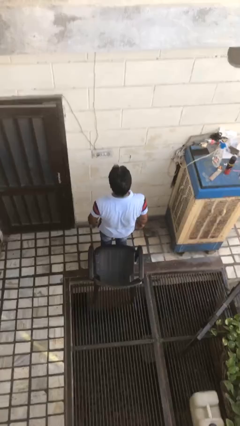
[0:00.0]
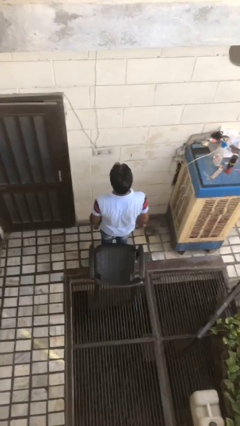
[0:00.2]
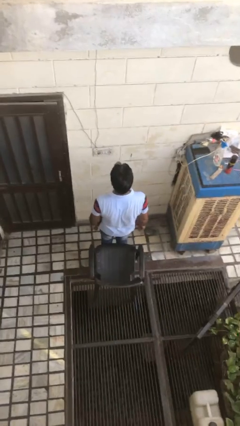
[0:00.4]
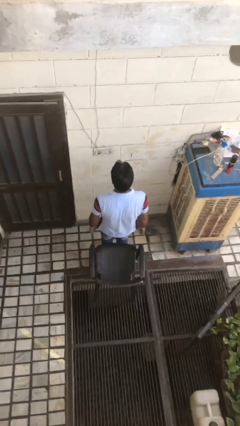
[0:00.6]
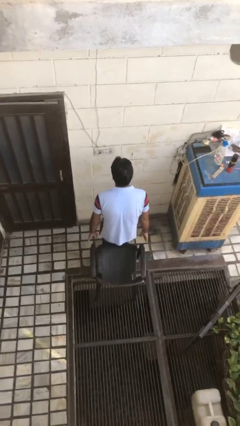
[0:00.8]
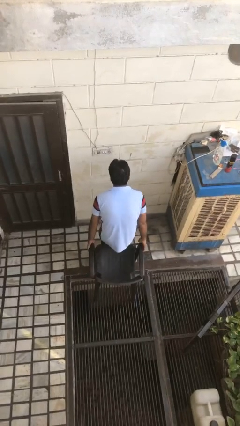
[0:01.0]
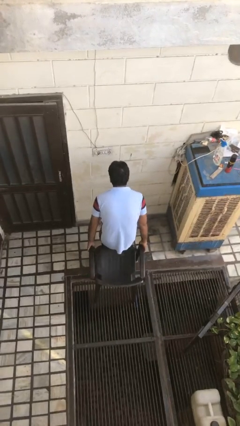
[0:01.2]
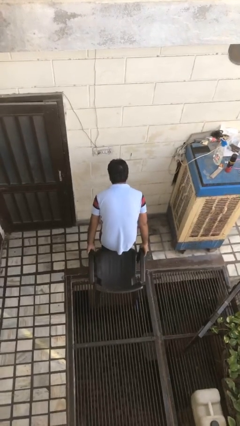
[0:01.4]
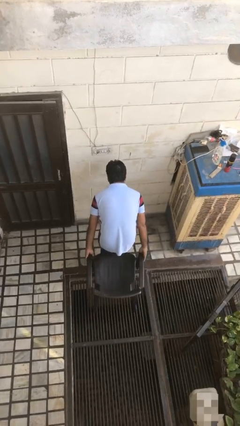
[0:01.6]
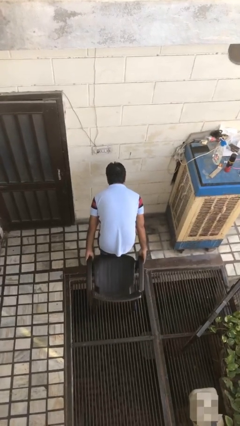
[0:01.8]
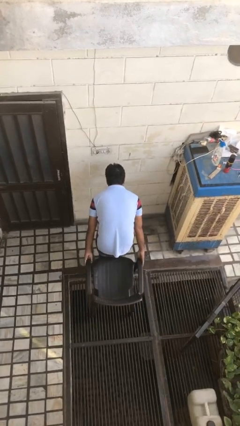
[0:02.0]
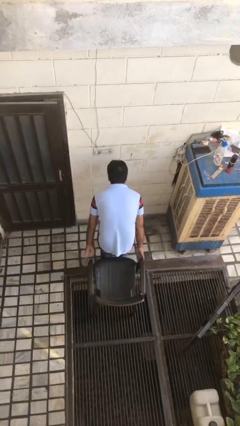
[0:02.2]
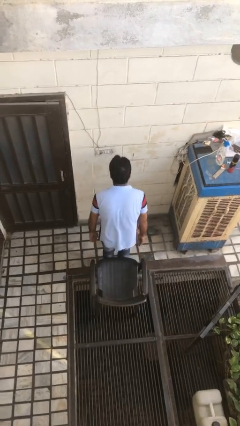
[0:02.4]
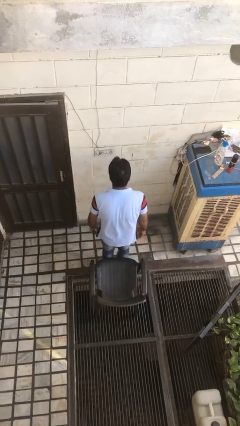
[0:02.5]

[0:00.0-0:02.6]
person pushes in chair

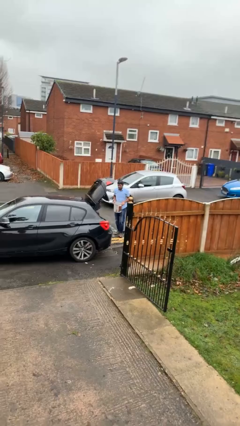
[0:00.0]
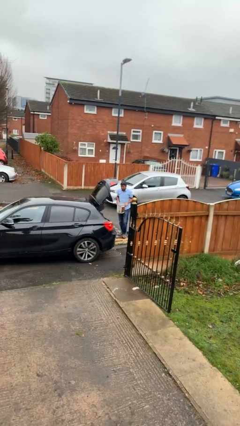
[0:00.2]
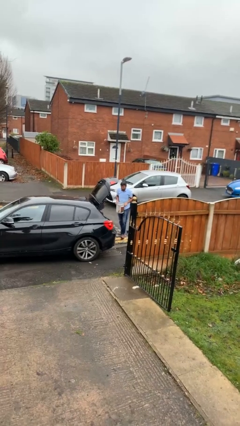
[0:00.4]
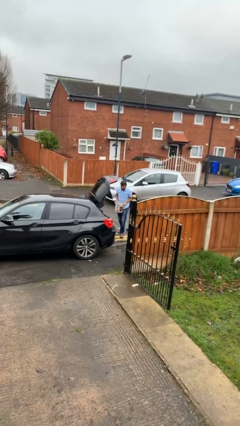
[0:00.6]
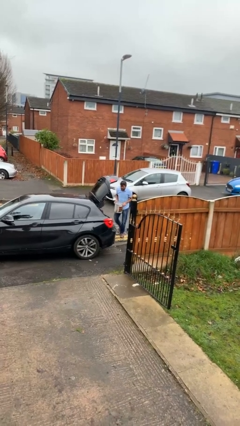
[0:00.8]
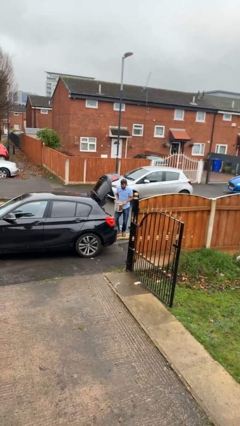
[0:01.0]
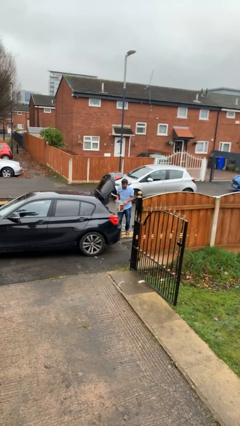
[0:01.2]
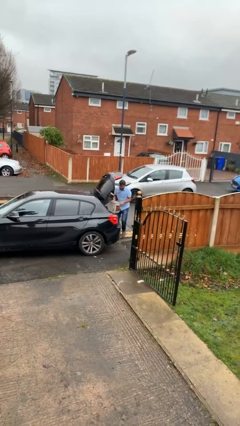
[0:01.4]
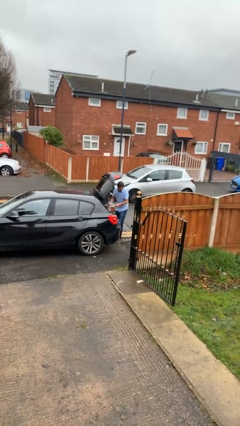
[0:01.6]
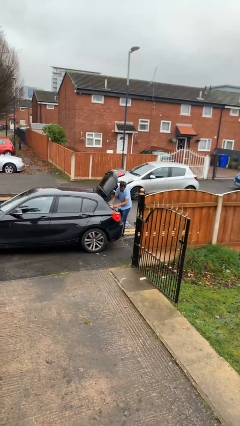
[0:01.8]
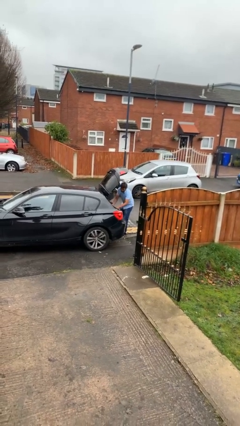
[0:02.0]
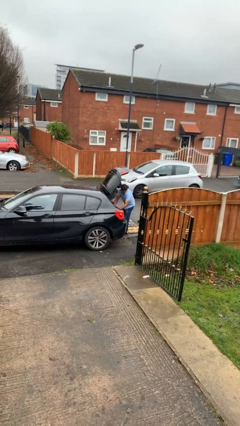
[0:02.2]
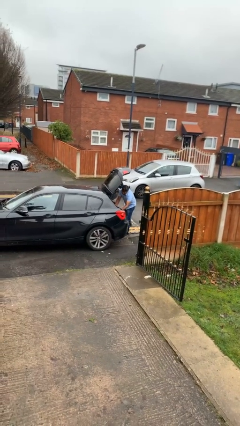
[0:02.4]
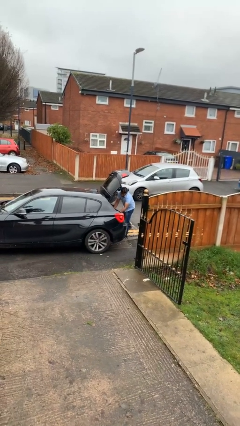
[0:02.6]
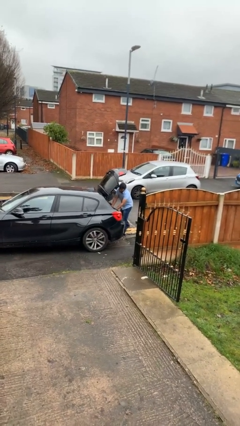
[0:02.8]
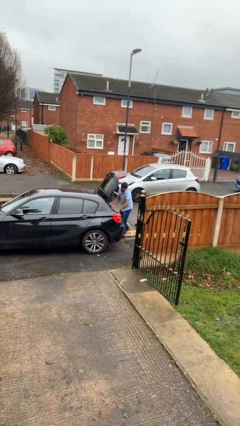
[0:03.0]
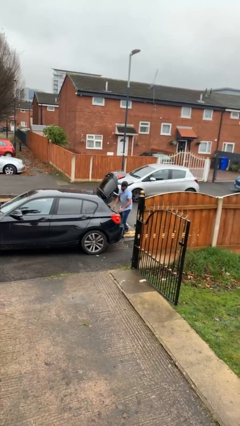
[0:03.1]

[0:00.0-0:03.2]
person loads car

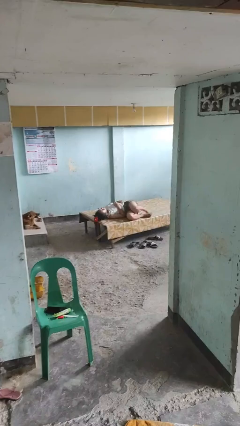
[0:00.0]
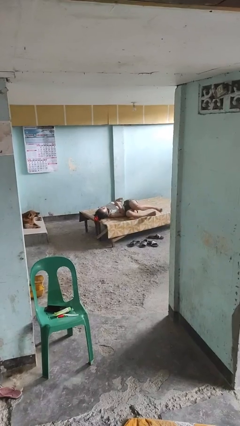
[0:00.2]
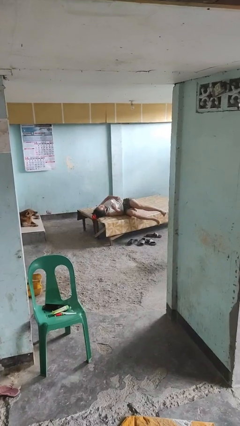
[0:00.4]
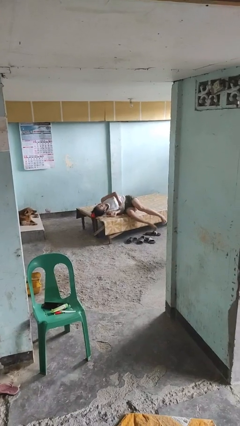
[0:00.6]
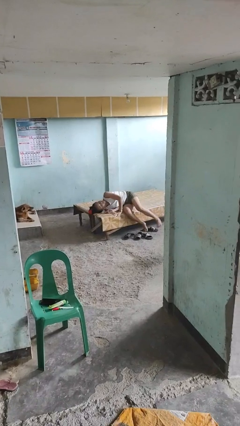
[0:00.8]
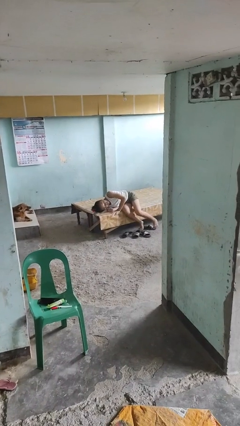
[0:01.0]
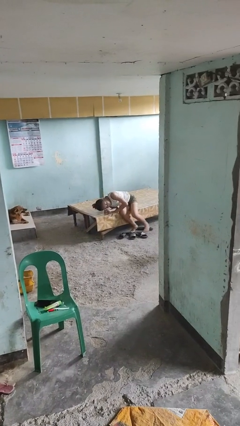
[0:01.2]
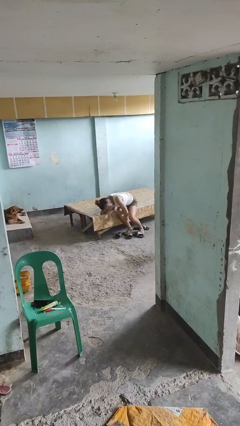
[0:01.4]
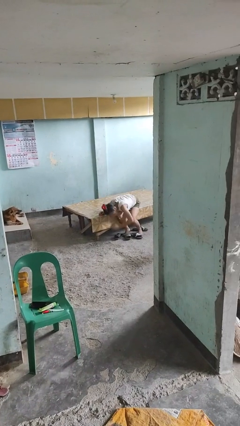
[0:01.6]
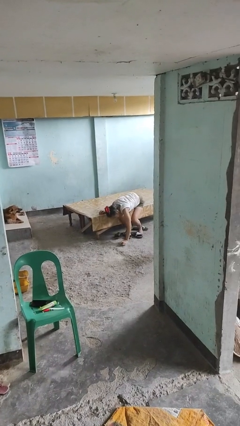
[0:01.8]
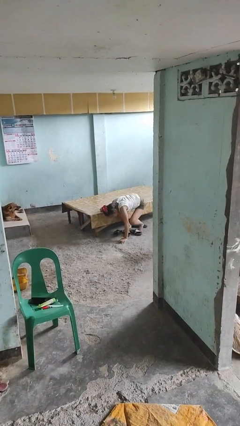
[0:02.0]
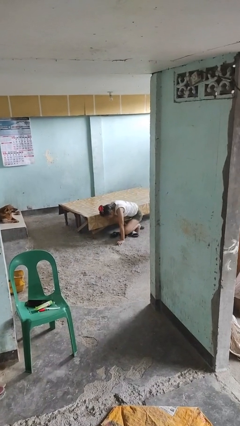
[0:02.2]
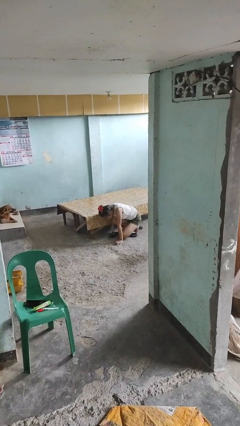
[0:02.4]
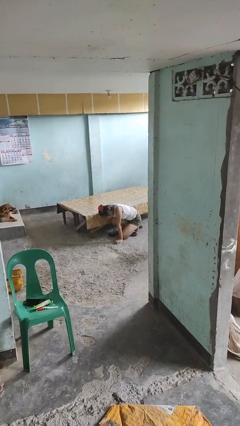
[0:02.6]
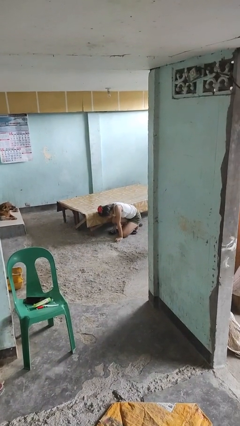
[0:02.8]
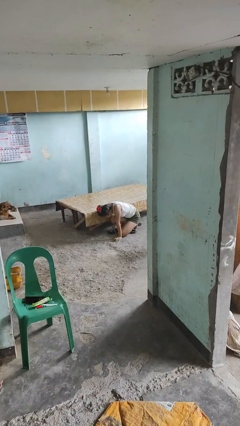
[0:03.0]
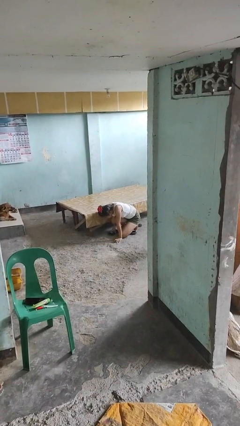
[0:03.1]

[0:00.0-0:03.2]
person falls from bed

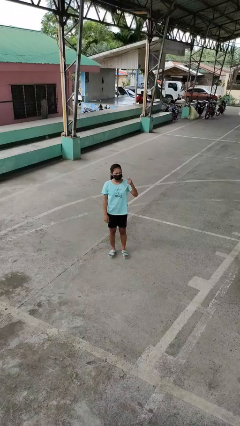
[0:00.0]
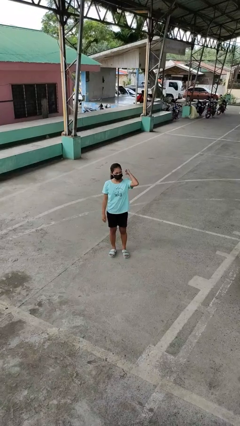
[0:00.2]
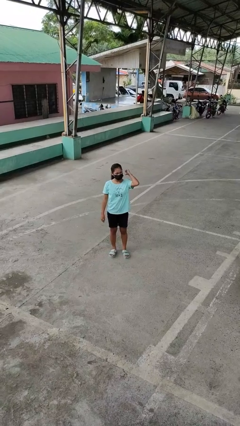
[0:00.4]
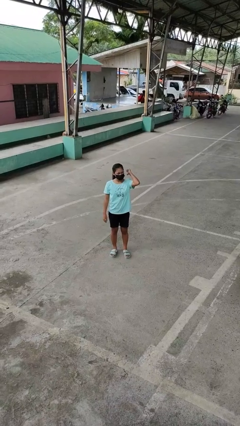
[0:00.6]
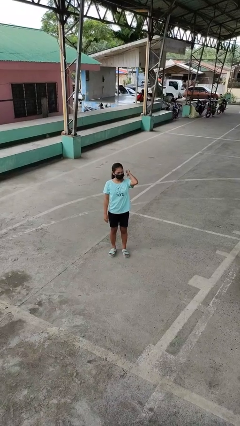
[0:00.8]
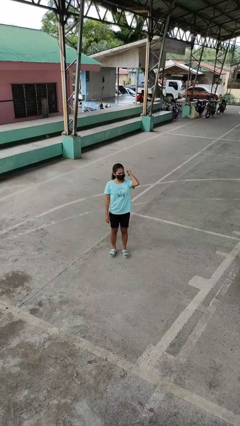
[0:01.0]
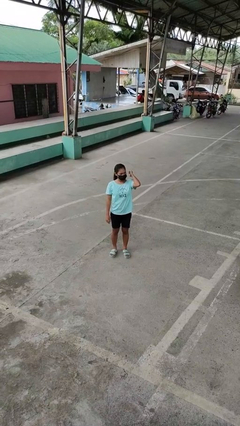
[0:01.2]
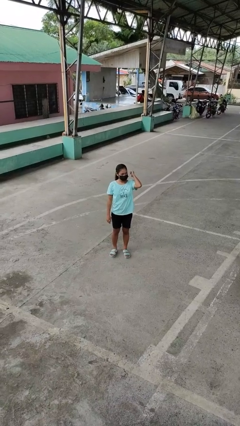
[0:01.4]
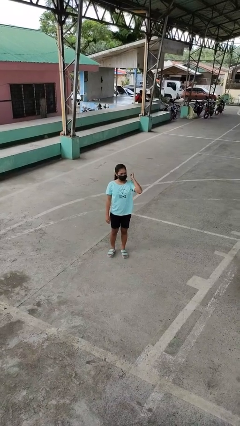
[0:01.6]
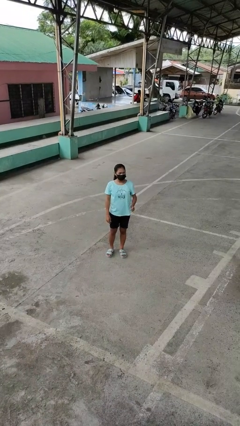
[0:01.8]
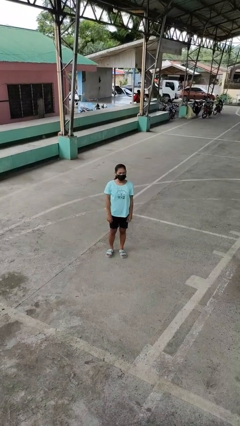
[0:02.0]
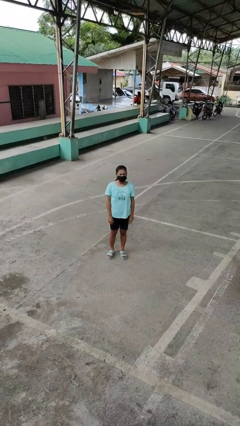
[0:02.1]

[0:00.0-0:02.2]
person gestures behind me

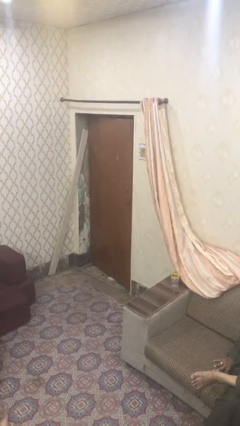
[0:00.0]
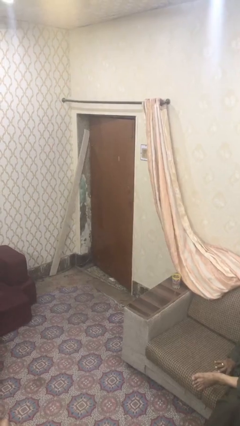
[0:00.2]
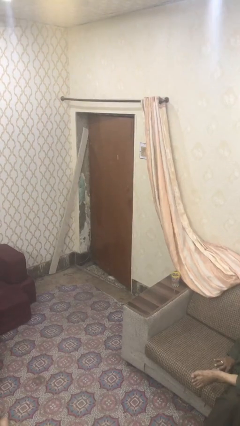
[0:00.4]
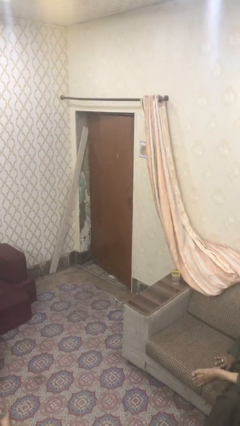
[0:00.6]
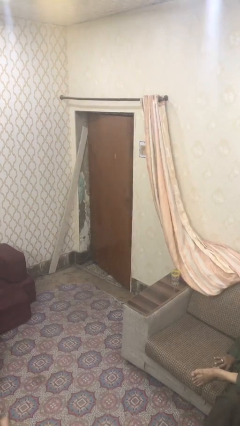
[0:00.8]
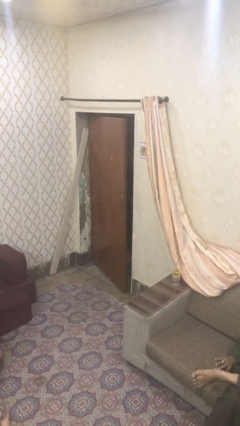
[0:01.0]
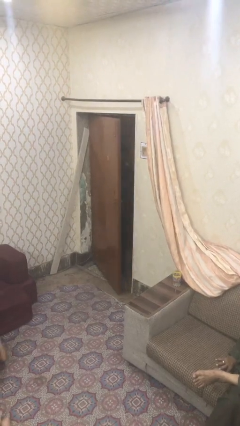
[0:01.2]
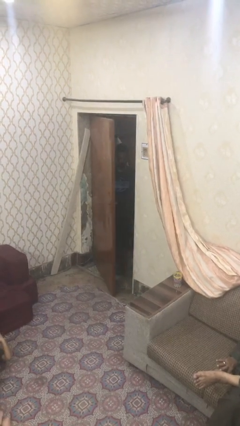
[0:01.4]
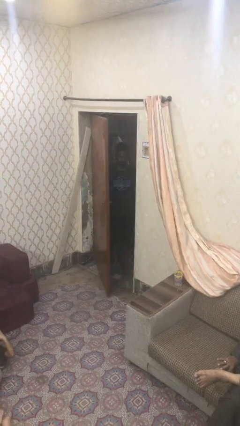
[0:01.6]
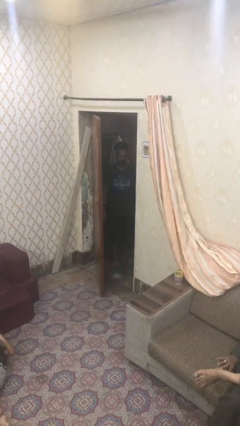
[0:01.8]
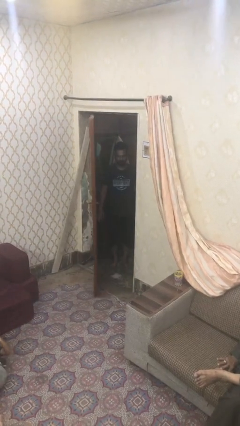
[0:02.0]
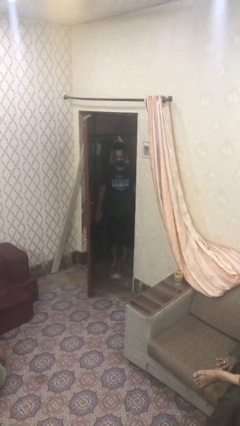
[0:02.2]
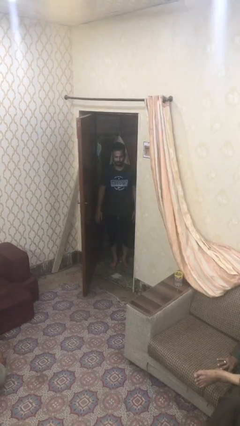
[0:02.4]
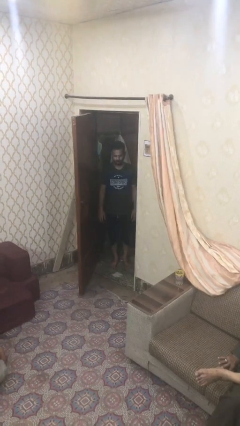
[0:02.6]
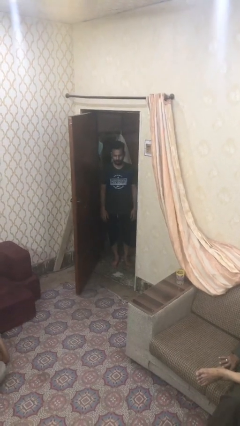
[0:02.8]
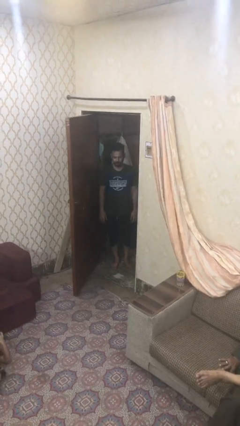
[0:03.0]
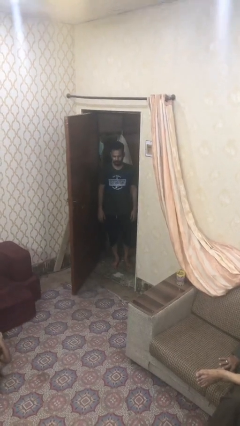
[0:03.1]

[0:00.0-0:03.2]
person opens facility door

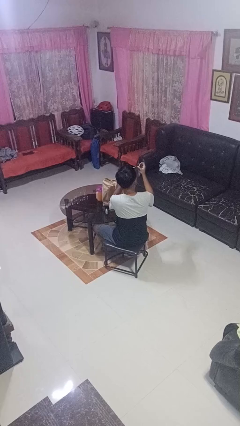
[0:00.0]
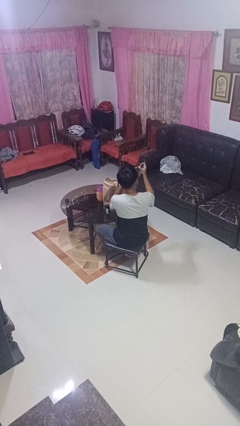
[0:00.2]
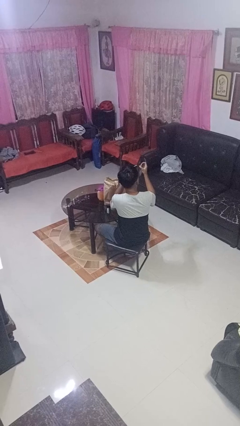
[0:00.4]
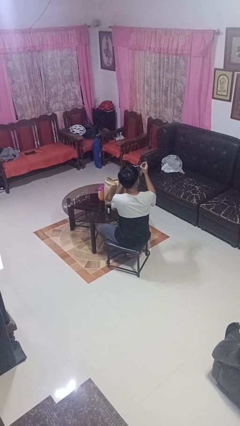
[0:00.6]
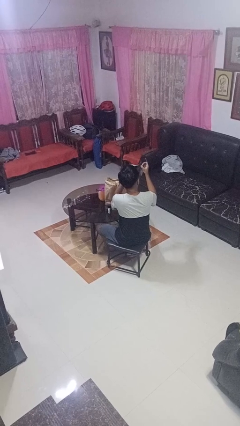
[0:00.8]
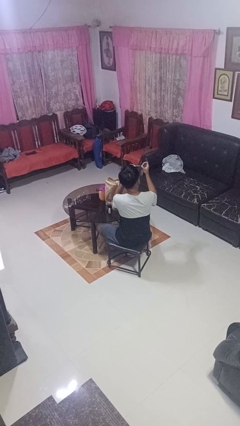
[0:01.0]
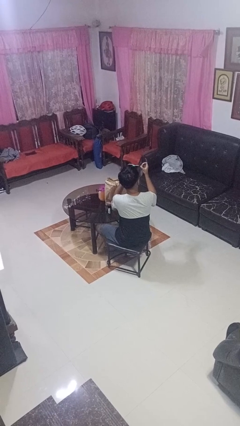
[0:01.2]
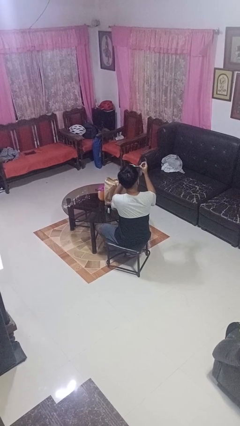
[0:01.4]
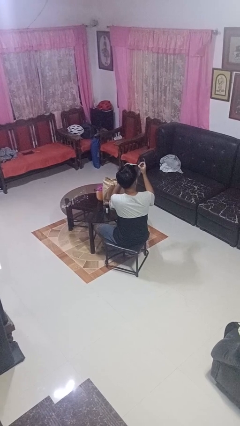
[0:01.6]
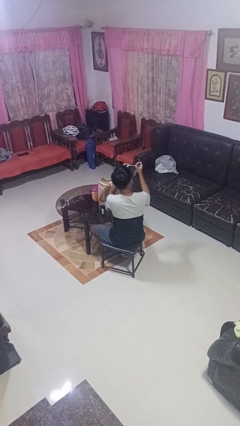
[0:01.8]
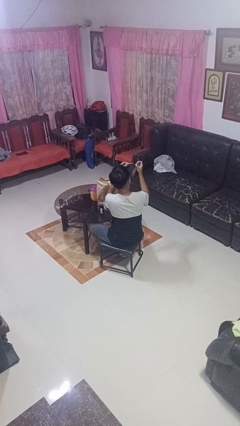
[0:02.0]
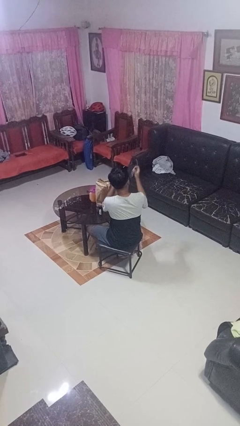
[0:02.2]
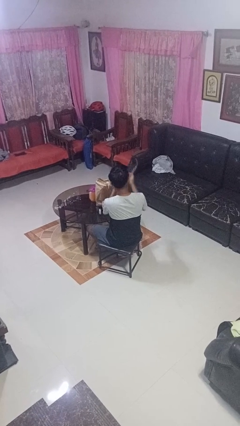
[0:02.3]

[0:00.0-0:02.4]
person paints fingernails

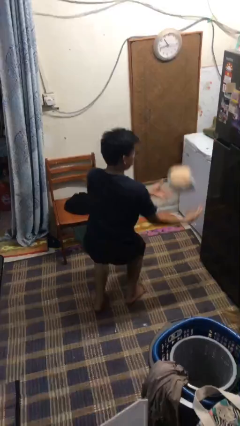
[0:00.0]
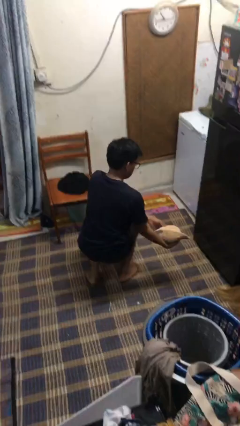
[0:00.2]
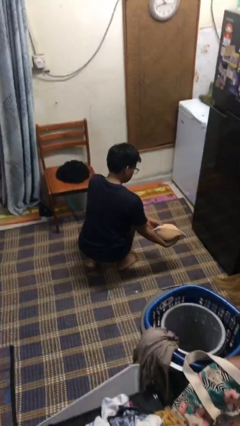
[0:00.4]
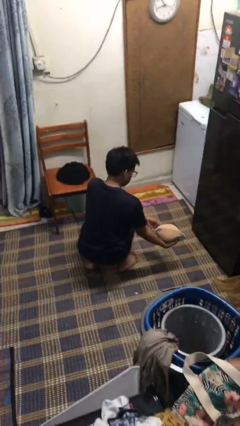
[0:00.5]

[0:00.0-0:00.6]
person catches dropped object
